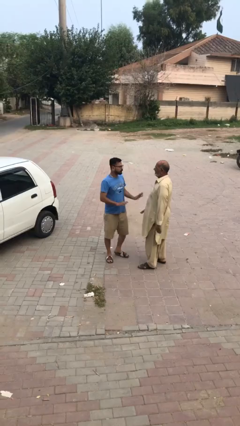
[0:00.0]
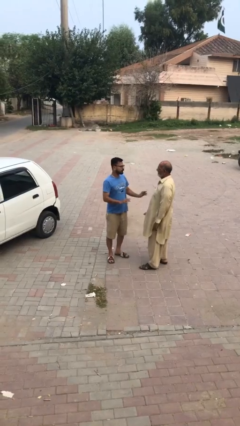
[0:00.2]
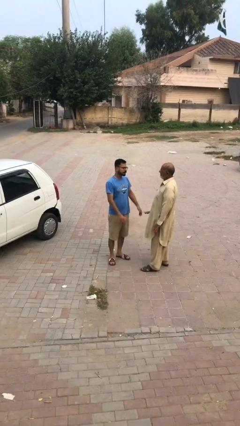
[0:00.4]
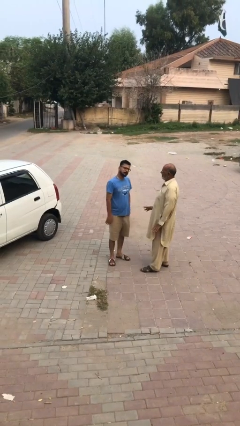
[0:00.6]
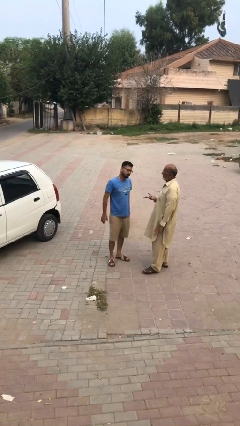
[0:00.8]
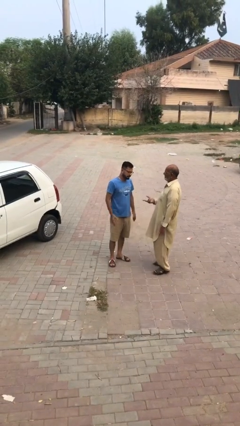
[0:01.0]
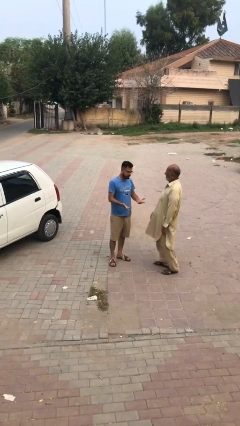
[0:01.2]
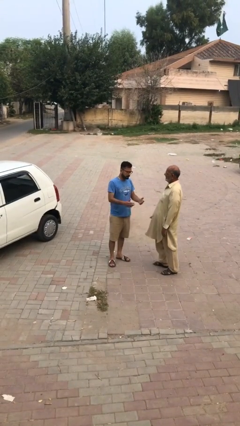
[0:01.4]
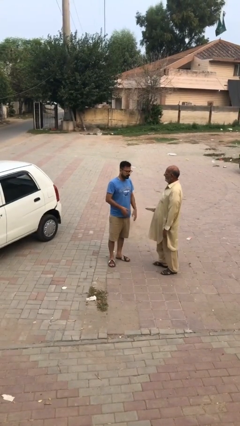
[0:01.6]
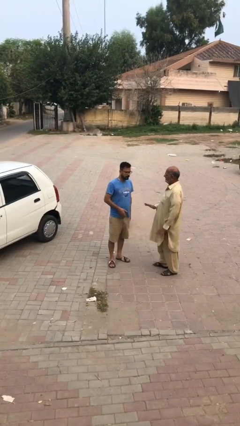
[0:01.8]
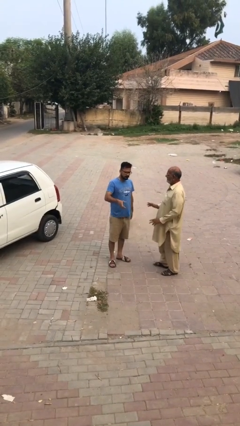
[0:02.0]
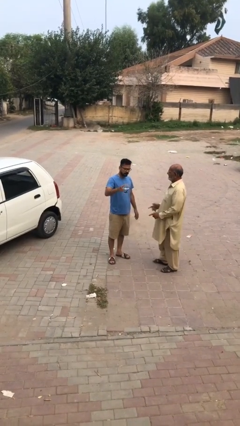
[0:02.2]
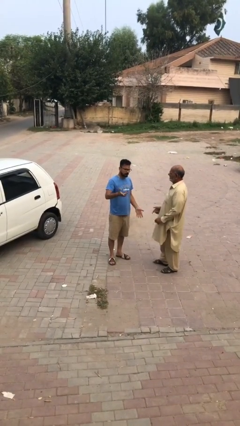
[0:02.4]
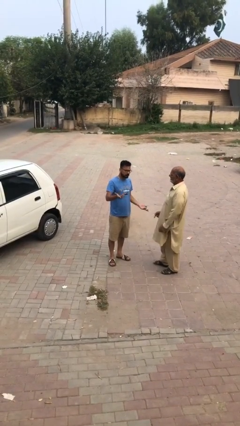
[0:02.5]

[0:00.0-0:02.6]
person talks to person

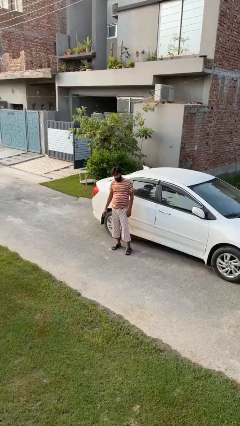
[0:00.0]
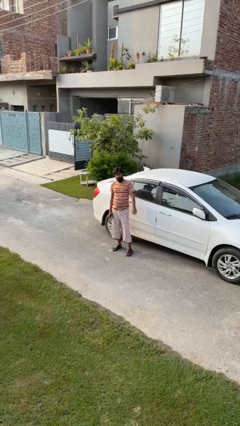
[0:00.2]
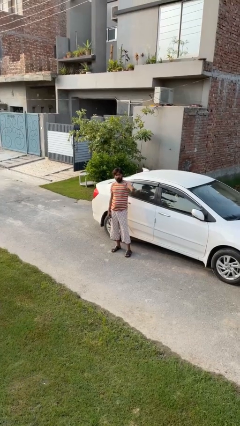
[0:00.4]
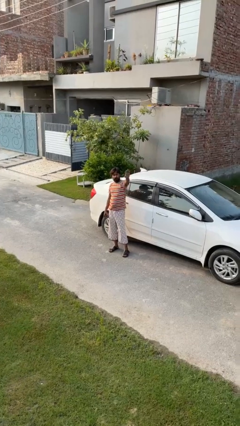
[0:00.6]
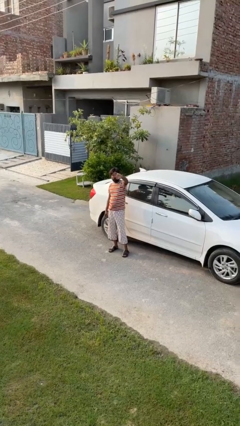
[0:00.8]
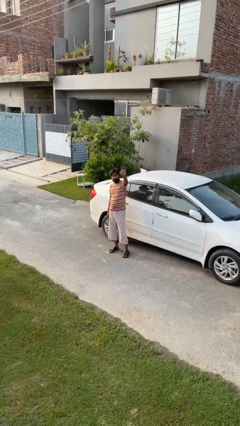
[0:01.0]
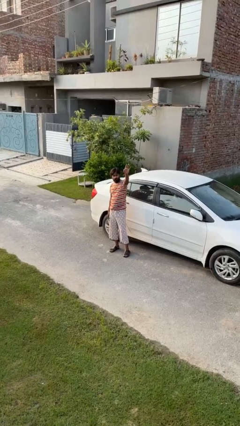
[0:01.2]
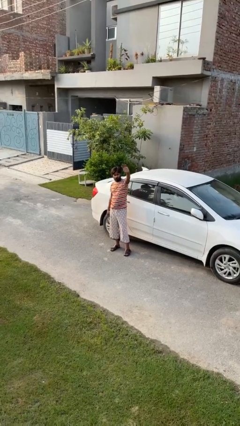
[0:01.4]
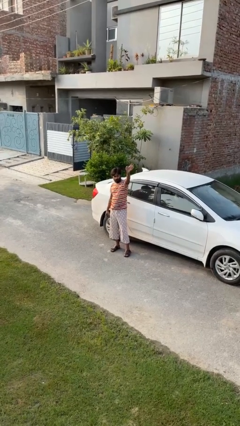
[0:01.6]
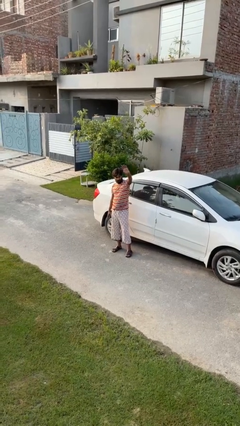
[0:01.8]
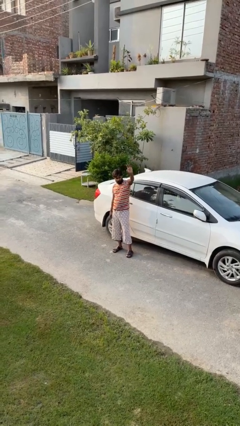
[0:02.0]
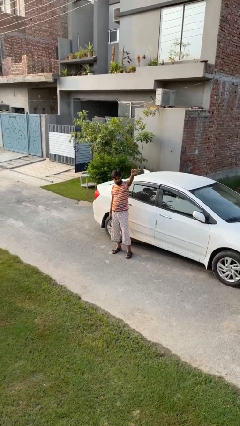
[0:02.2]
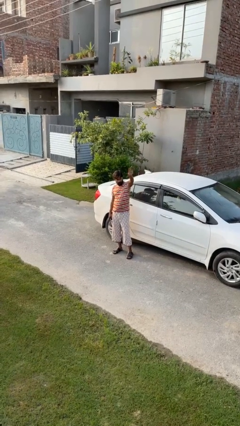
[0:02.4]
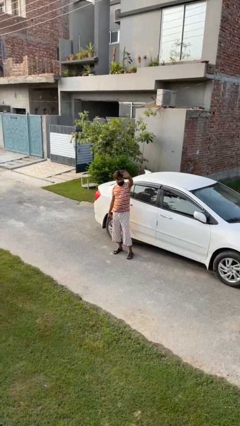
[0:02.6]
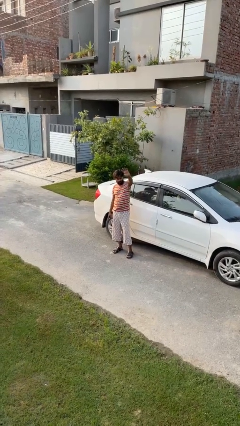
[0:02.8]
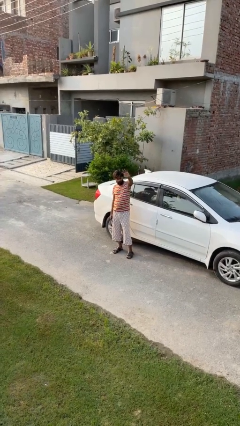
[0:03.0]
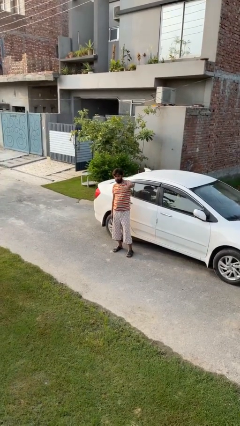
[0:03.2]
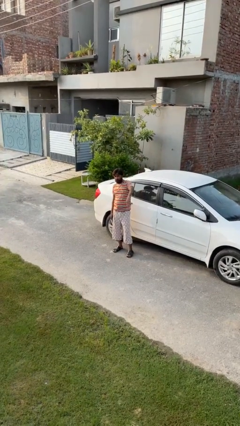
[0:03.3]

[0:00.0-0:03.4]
person waves at person

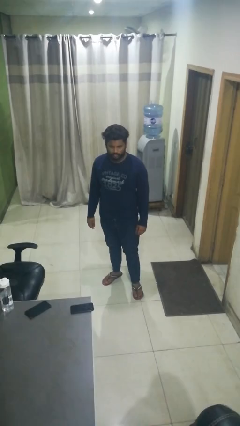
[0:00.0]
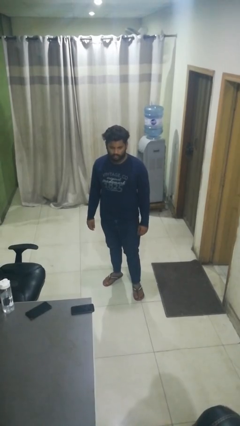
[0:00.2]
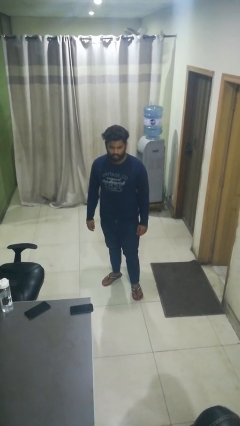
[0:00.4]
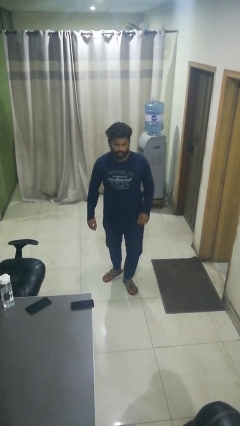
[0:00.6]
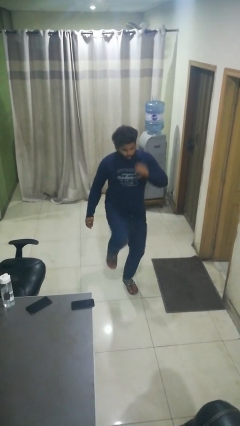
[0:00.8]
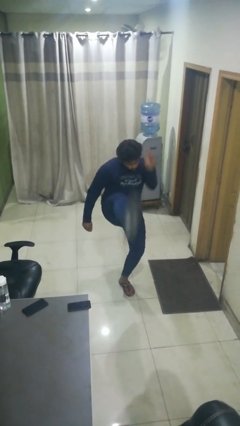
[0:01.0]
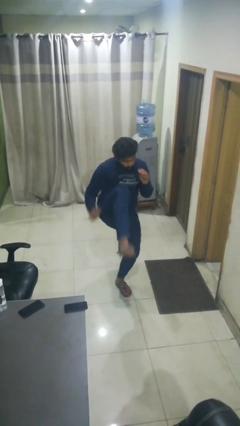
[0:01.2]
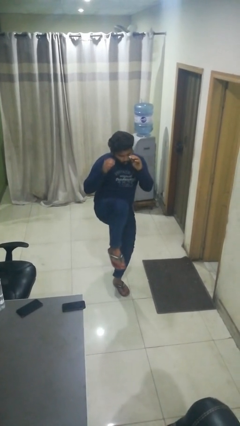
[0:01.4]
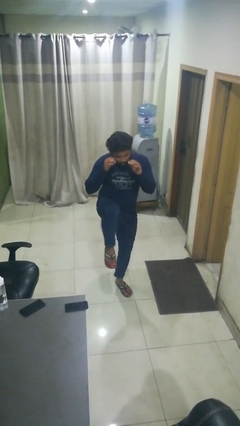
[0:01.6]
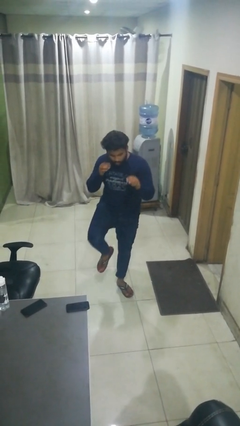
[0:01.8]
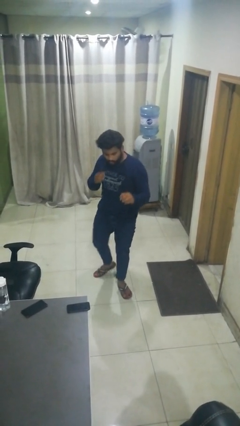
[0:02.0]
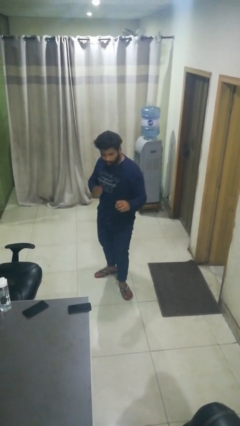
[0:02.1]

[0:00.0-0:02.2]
person karate kicks

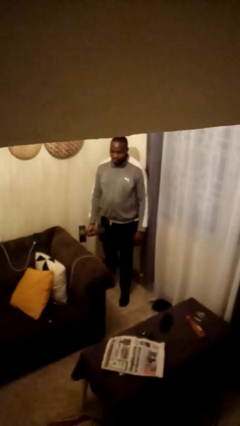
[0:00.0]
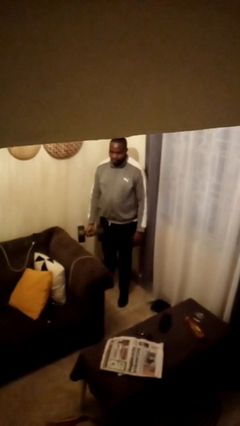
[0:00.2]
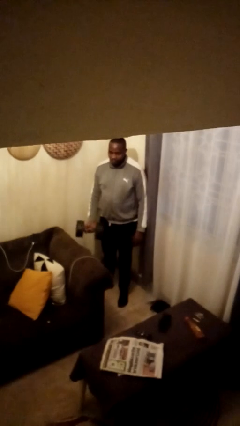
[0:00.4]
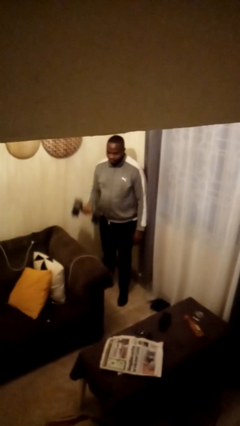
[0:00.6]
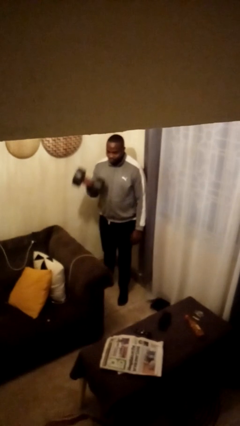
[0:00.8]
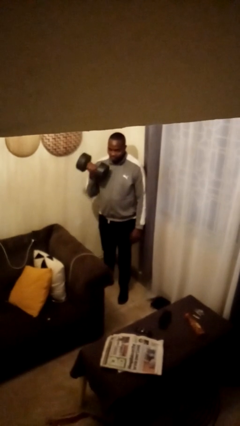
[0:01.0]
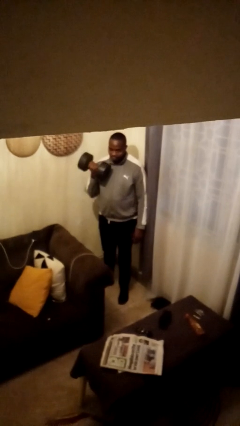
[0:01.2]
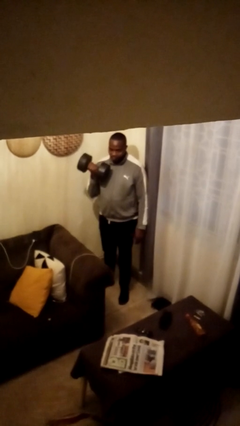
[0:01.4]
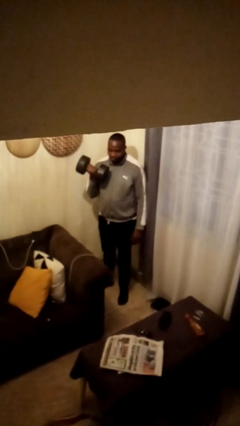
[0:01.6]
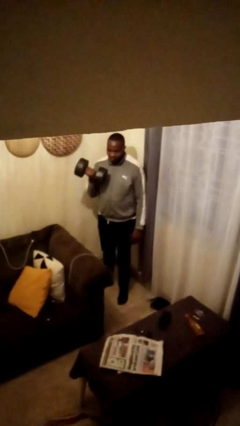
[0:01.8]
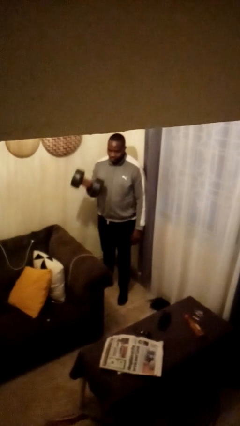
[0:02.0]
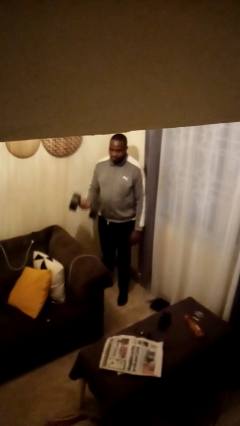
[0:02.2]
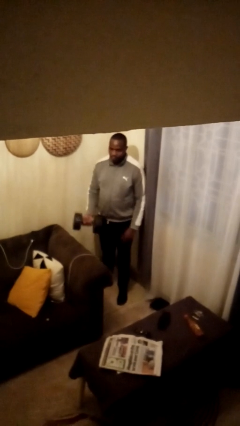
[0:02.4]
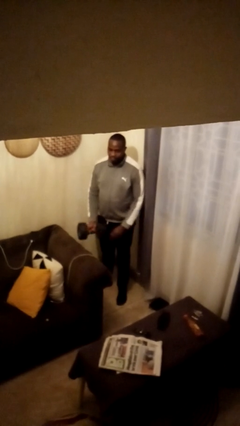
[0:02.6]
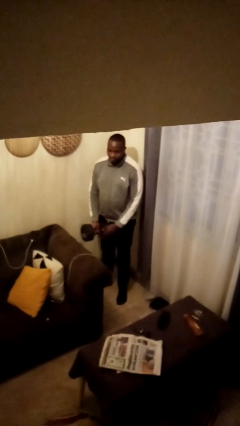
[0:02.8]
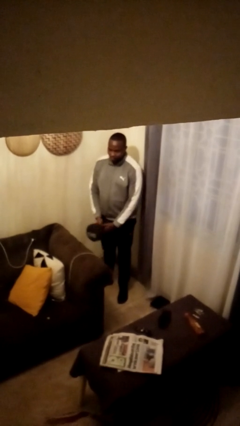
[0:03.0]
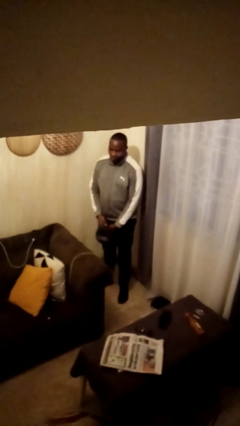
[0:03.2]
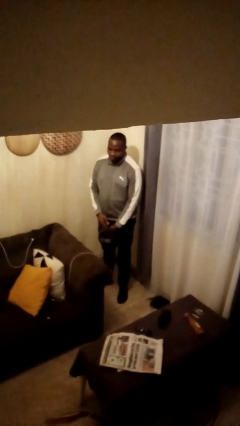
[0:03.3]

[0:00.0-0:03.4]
person lifts dumbbells

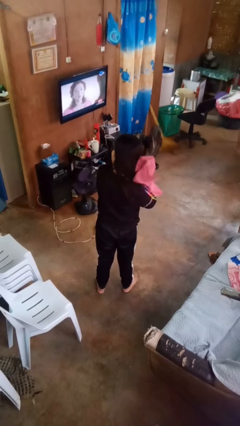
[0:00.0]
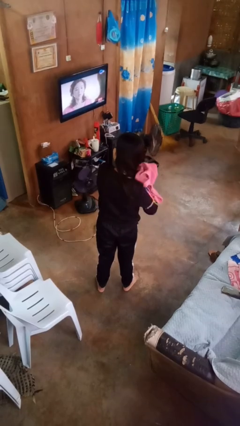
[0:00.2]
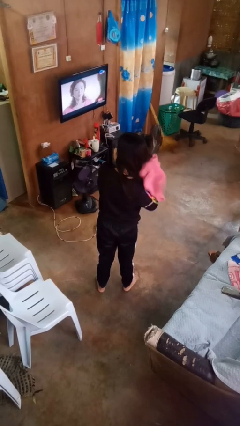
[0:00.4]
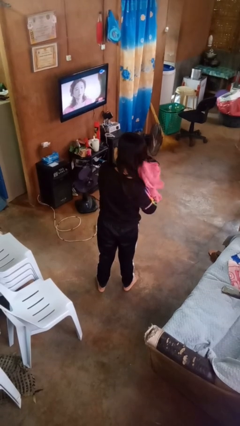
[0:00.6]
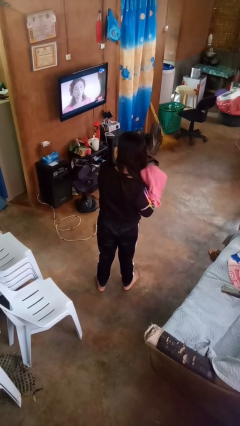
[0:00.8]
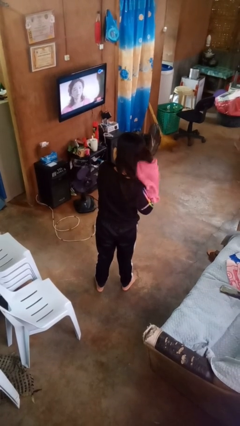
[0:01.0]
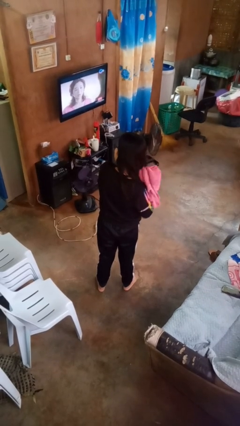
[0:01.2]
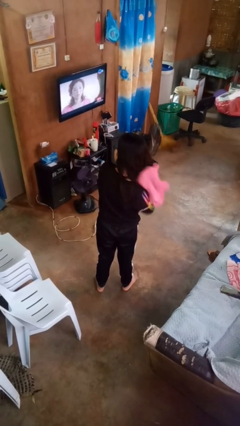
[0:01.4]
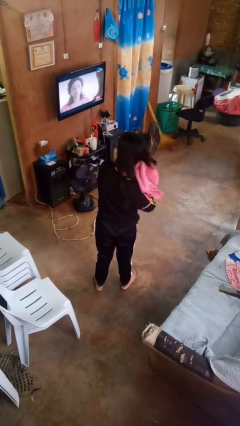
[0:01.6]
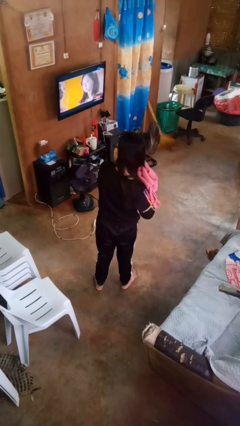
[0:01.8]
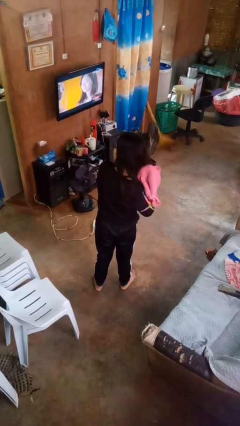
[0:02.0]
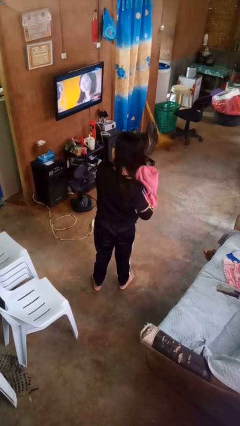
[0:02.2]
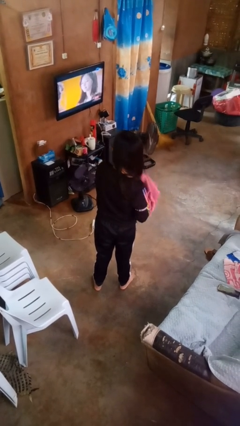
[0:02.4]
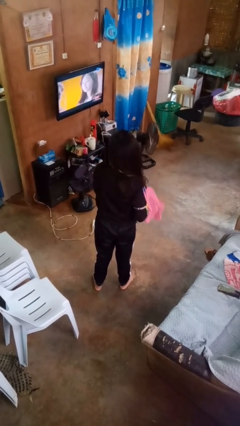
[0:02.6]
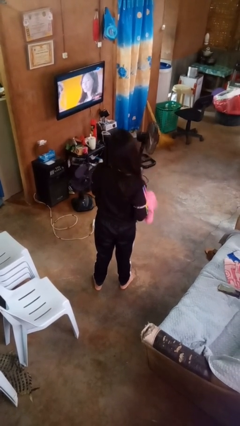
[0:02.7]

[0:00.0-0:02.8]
person dries hair with towel

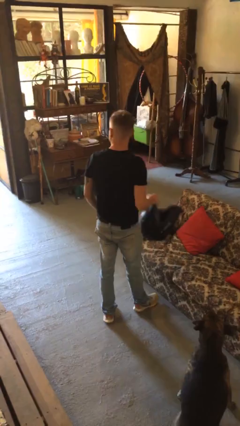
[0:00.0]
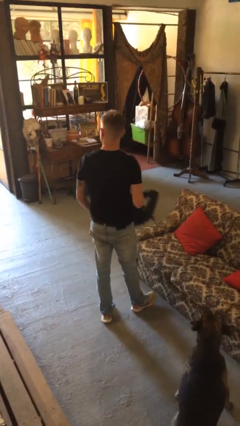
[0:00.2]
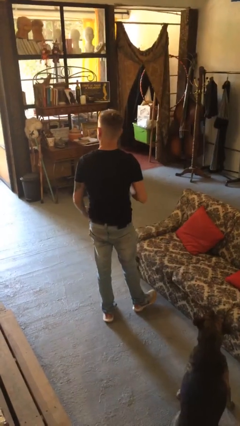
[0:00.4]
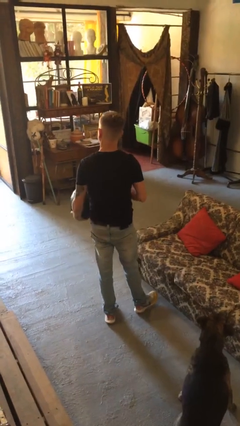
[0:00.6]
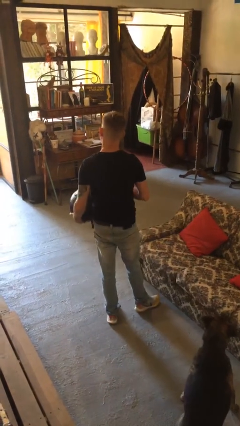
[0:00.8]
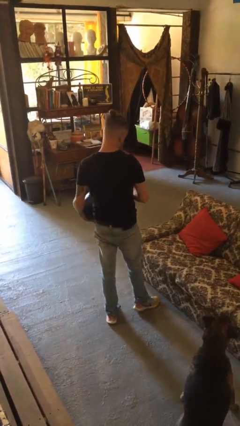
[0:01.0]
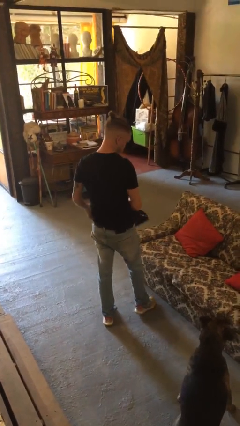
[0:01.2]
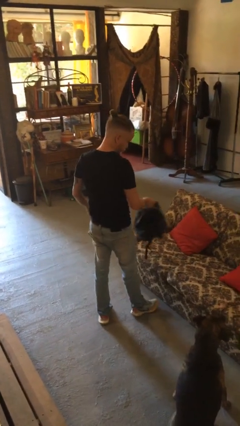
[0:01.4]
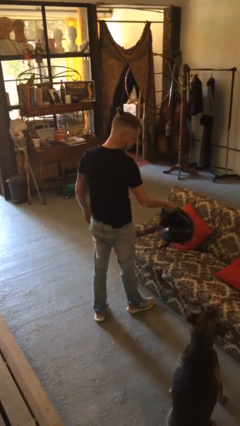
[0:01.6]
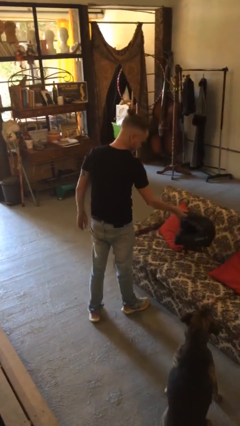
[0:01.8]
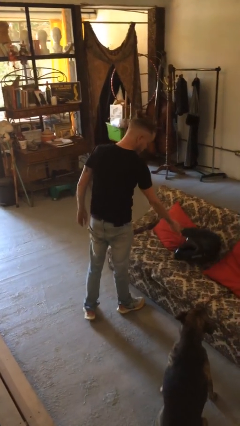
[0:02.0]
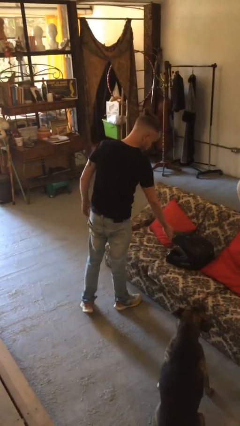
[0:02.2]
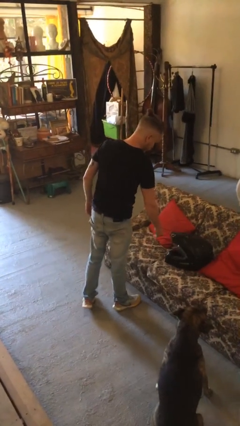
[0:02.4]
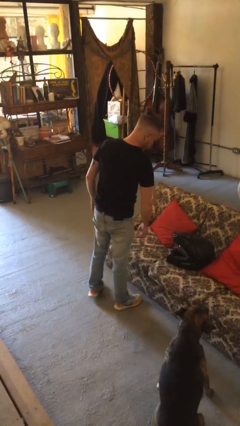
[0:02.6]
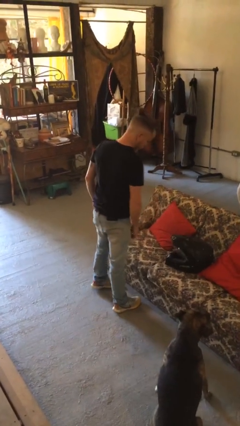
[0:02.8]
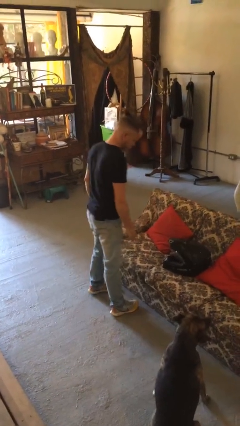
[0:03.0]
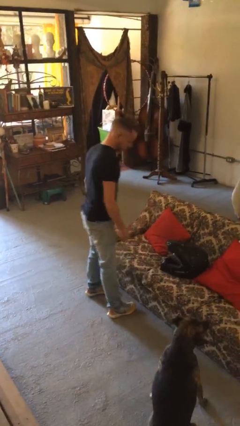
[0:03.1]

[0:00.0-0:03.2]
person puts down object on couch
